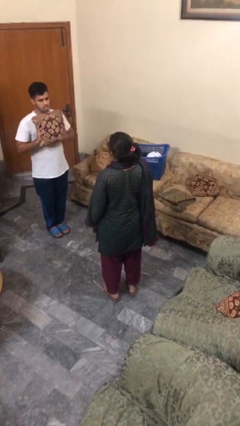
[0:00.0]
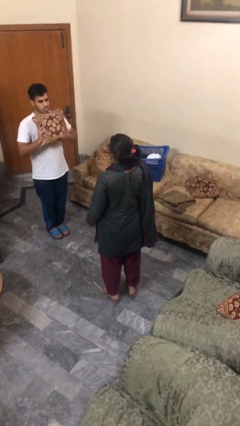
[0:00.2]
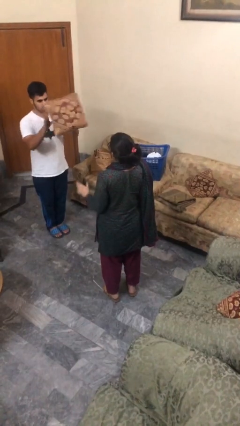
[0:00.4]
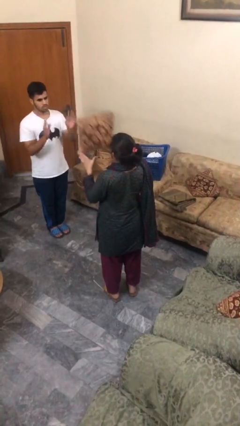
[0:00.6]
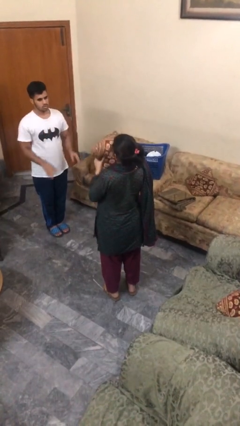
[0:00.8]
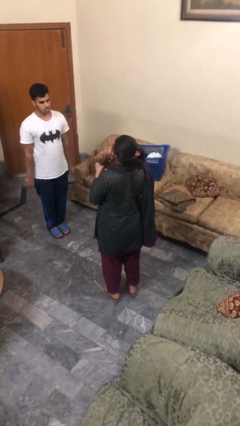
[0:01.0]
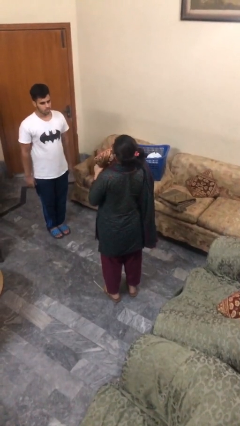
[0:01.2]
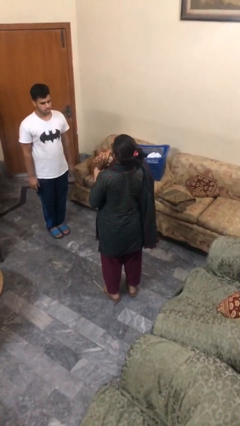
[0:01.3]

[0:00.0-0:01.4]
person catches object from person

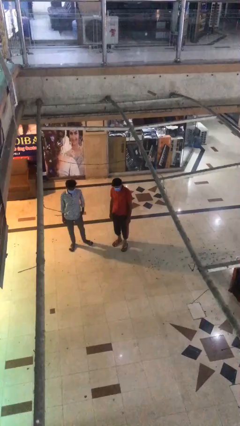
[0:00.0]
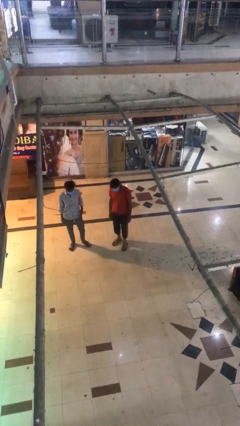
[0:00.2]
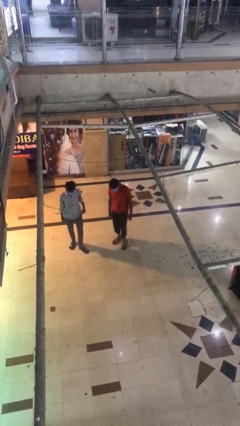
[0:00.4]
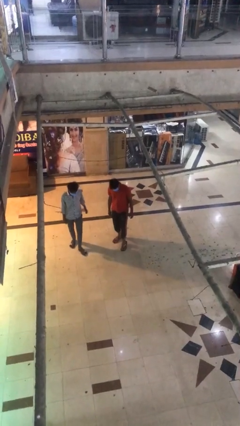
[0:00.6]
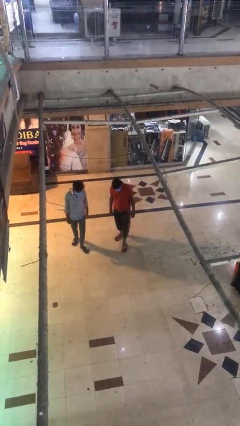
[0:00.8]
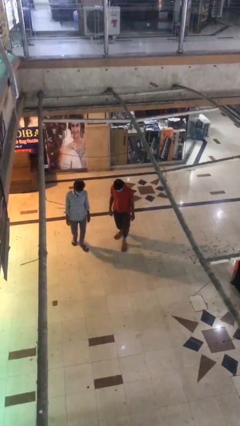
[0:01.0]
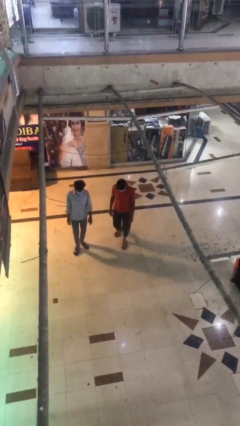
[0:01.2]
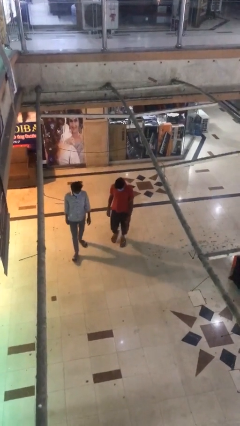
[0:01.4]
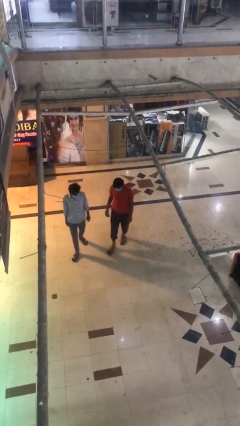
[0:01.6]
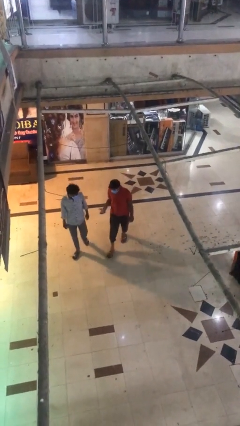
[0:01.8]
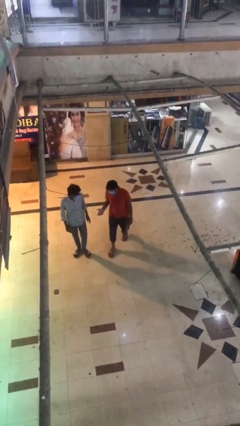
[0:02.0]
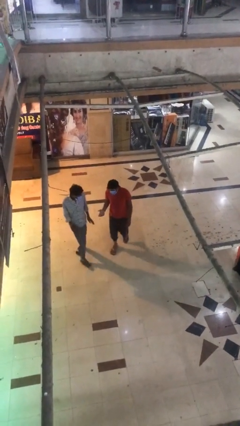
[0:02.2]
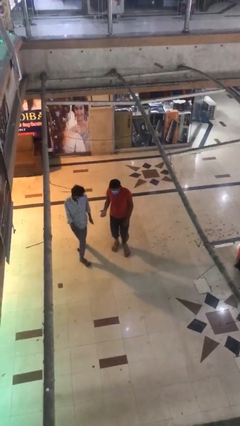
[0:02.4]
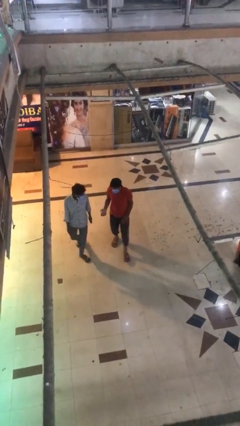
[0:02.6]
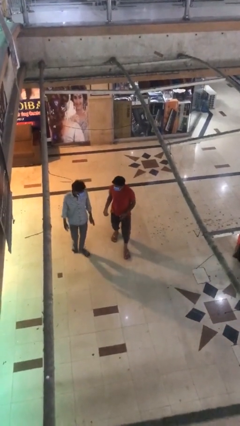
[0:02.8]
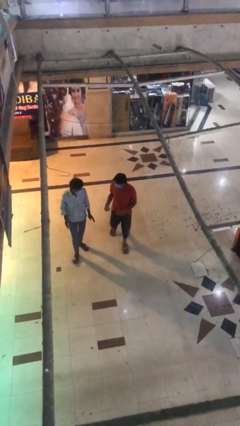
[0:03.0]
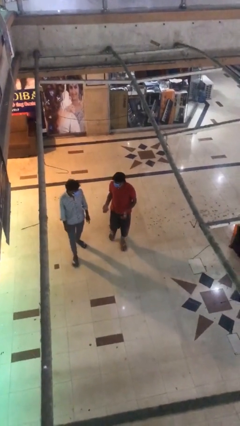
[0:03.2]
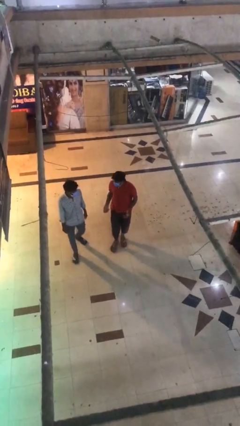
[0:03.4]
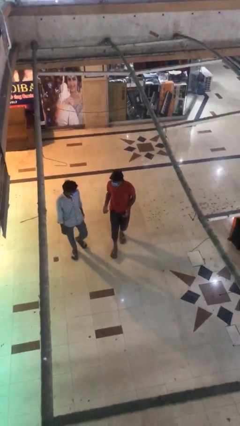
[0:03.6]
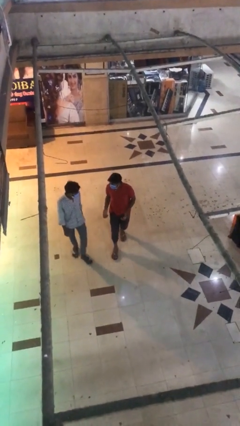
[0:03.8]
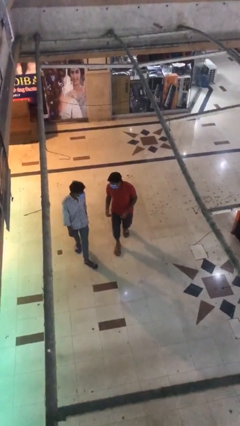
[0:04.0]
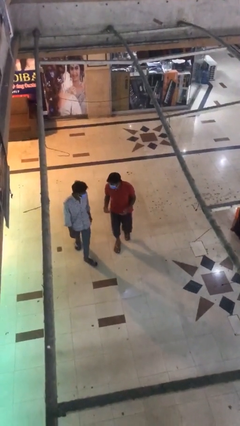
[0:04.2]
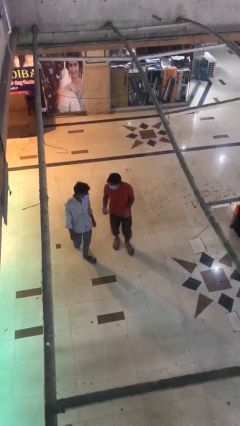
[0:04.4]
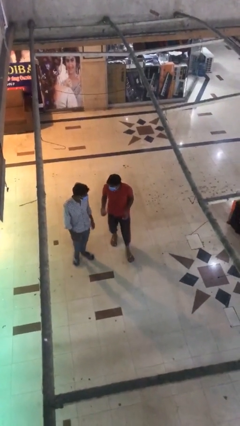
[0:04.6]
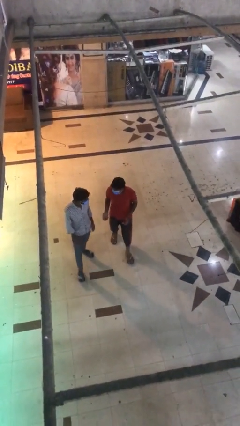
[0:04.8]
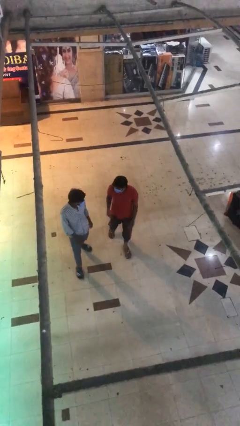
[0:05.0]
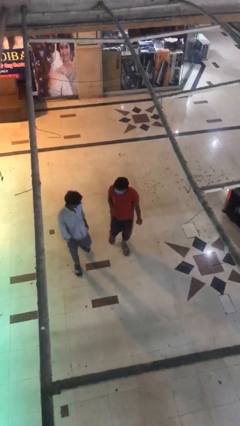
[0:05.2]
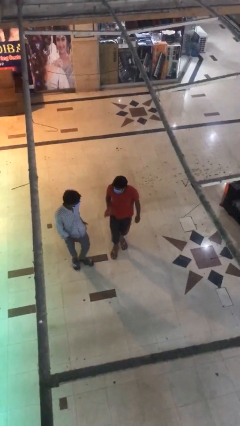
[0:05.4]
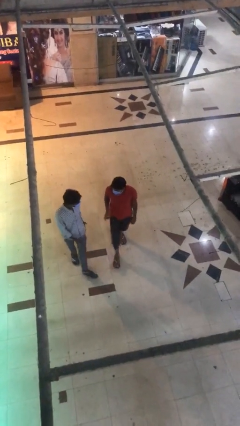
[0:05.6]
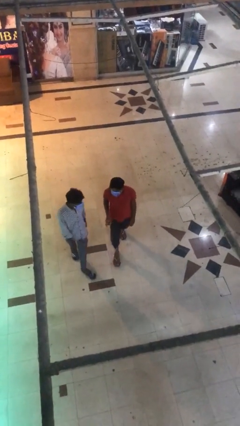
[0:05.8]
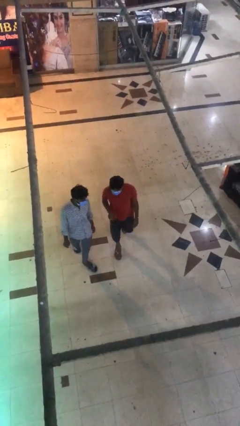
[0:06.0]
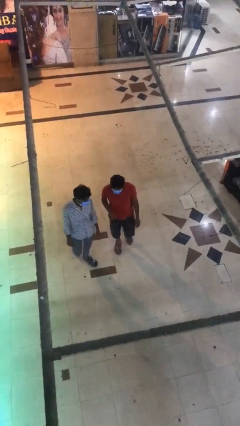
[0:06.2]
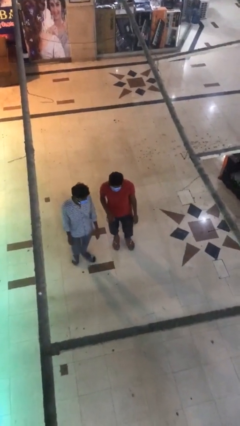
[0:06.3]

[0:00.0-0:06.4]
person talks to person

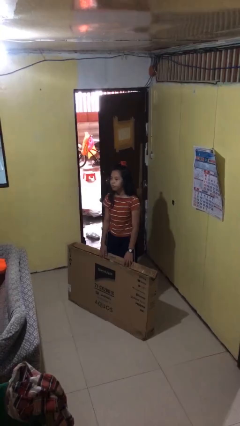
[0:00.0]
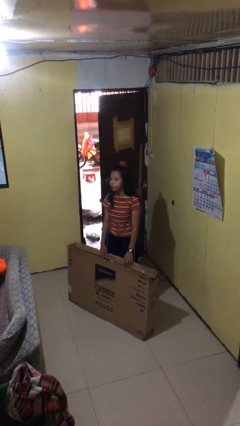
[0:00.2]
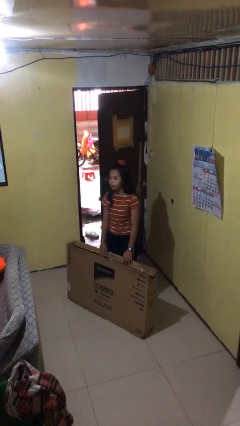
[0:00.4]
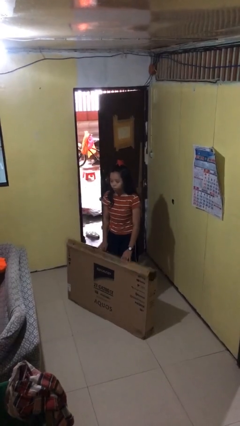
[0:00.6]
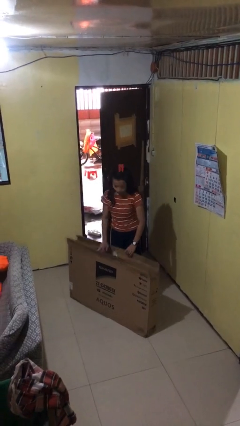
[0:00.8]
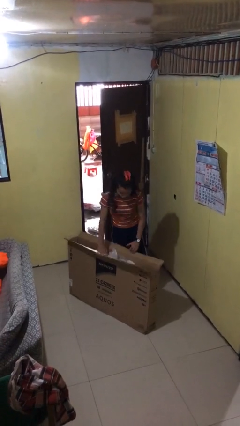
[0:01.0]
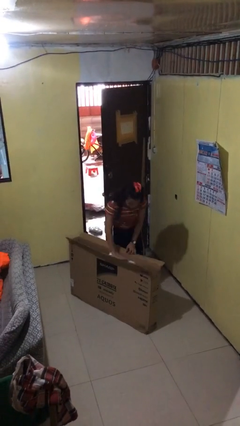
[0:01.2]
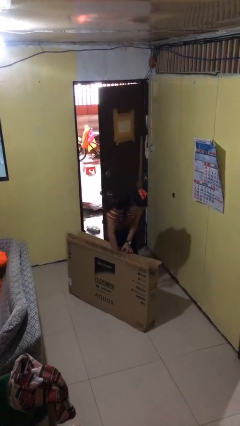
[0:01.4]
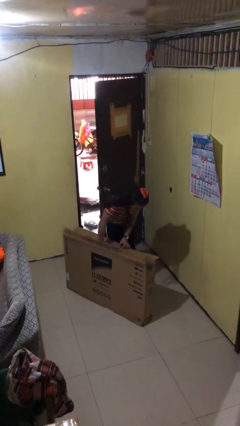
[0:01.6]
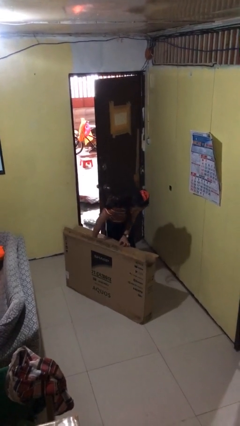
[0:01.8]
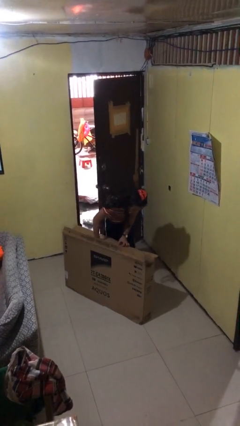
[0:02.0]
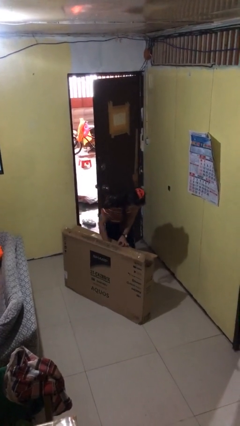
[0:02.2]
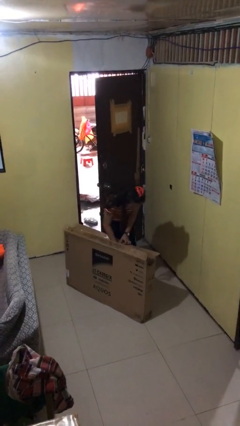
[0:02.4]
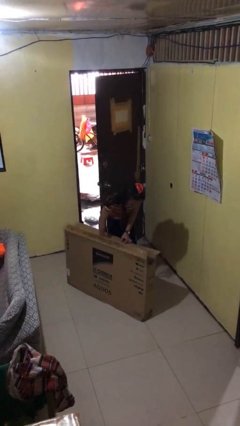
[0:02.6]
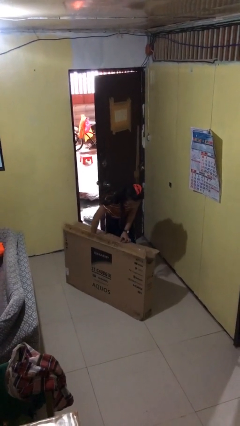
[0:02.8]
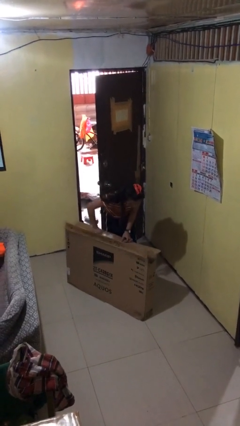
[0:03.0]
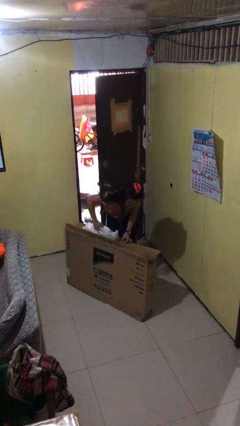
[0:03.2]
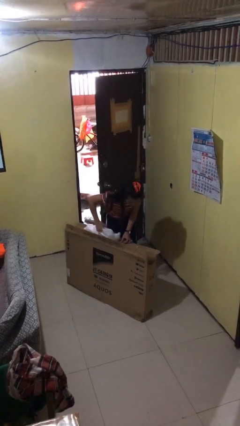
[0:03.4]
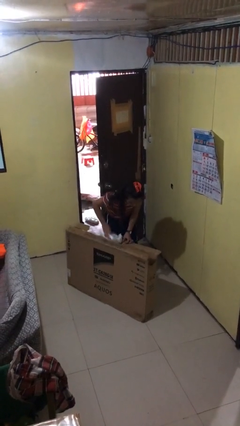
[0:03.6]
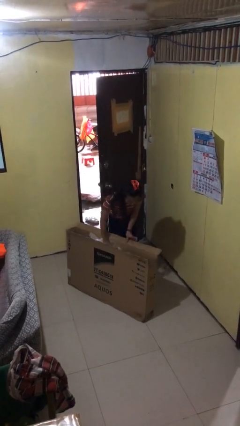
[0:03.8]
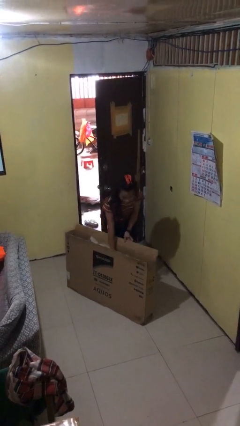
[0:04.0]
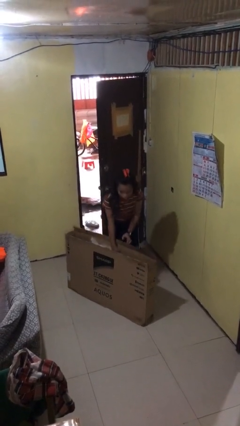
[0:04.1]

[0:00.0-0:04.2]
person searches in box

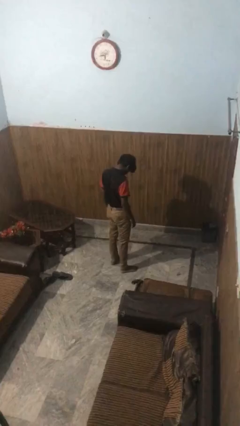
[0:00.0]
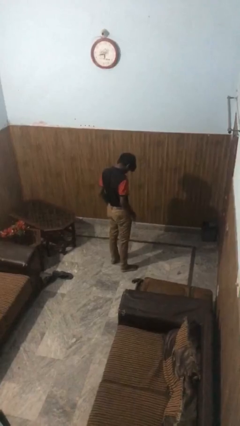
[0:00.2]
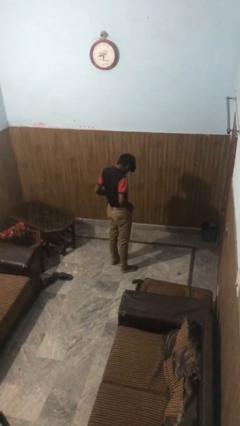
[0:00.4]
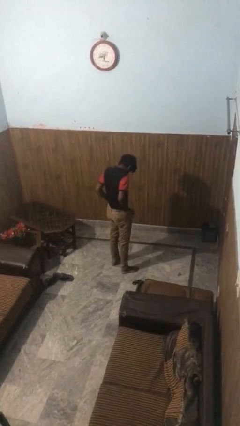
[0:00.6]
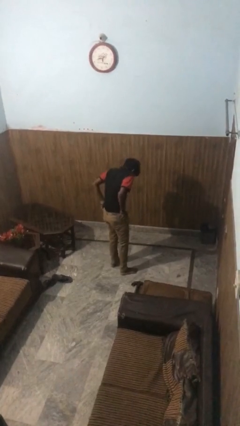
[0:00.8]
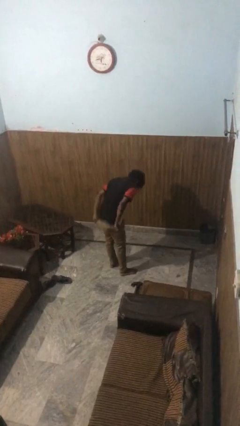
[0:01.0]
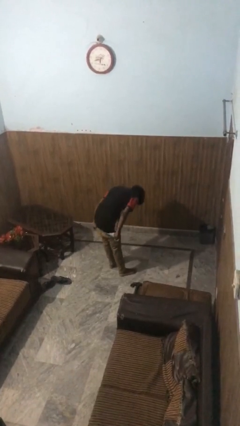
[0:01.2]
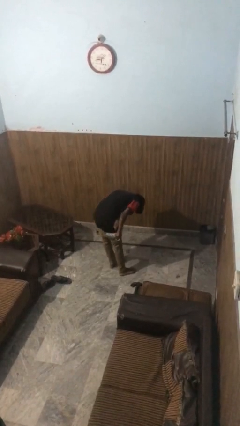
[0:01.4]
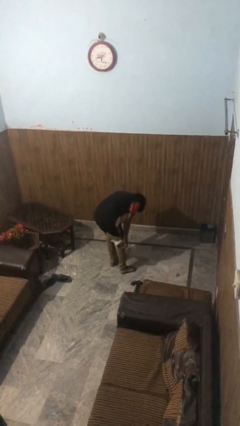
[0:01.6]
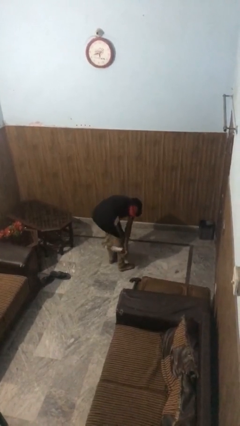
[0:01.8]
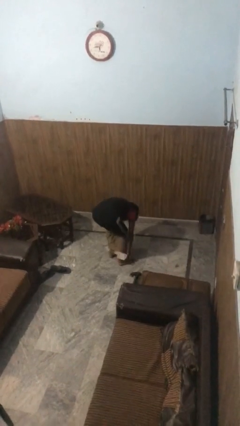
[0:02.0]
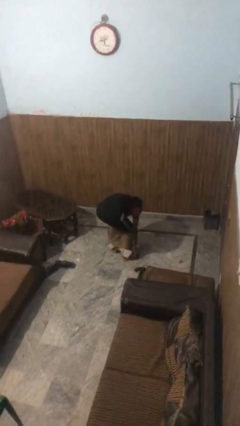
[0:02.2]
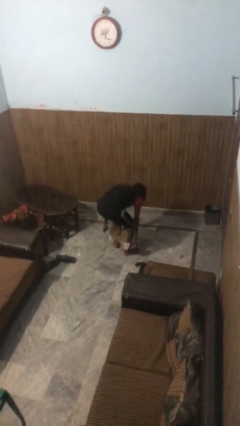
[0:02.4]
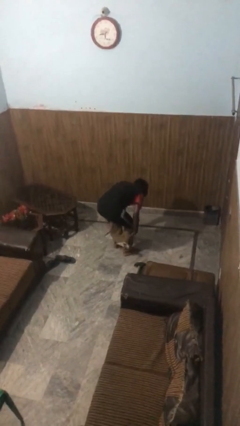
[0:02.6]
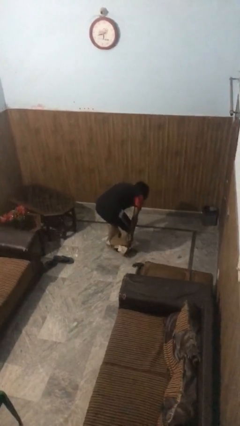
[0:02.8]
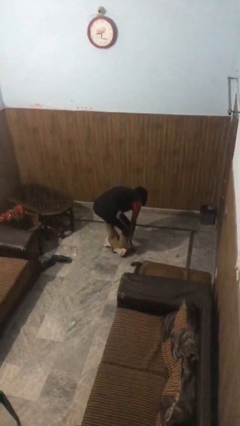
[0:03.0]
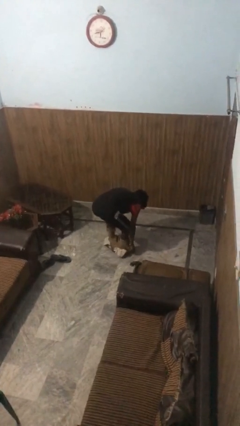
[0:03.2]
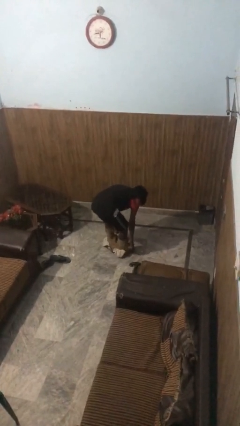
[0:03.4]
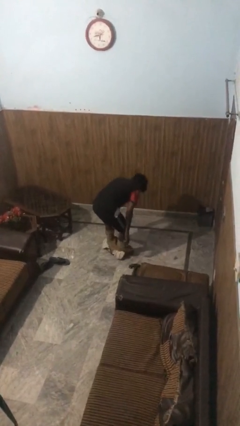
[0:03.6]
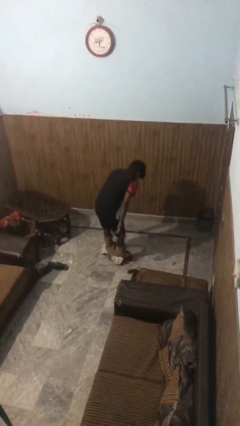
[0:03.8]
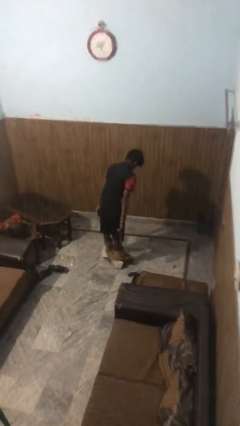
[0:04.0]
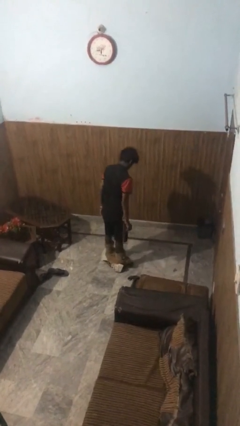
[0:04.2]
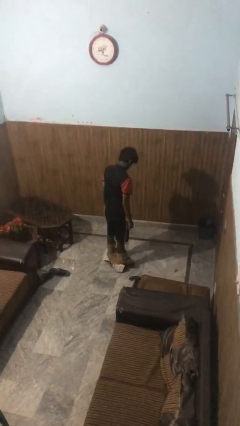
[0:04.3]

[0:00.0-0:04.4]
person takes off pants

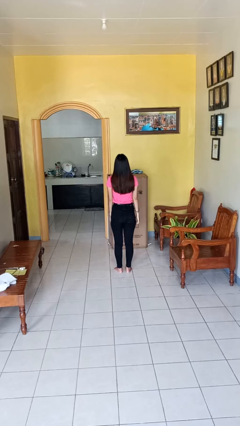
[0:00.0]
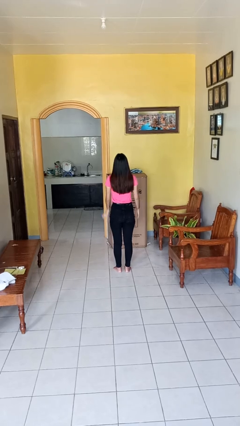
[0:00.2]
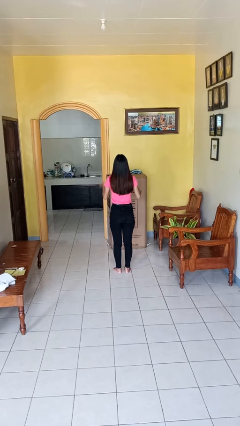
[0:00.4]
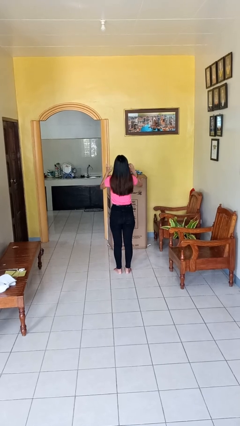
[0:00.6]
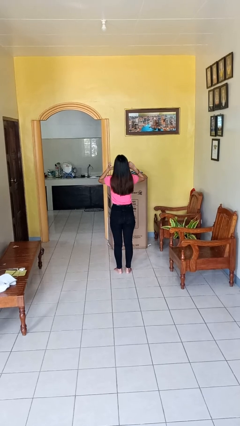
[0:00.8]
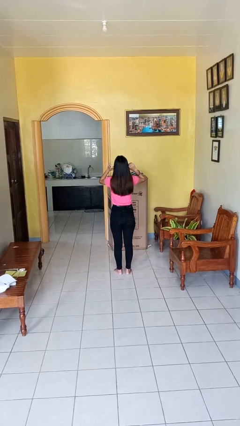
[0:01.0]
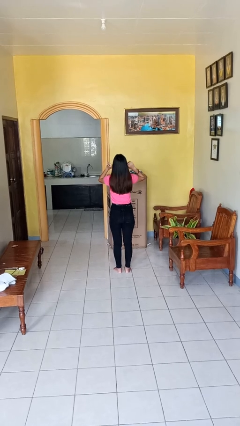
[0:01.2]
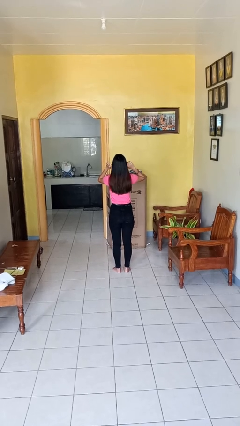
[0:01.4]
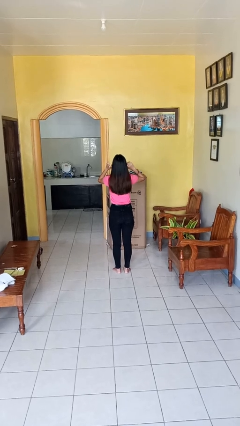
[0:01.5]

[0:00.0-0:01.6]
person puts fingers in ear
